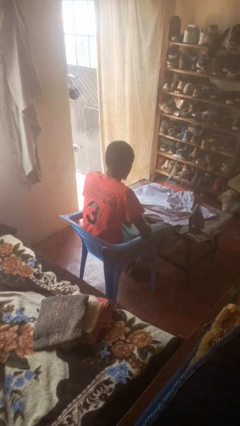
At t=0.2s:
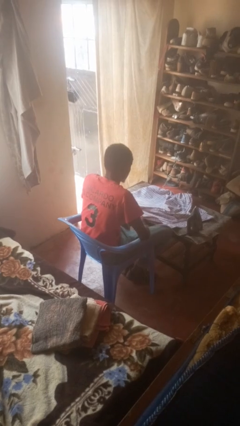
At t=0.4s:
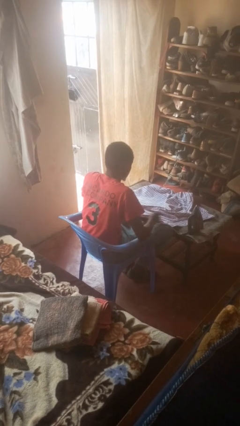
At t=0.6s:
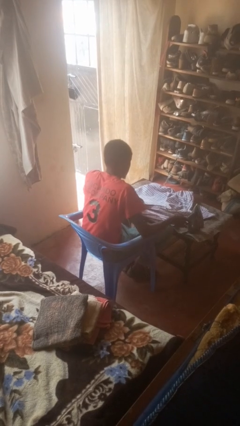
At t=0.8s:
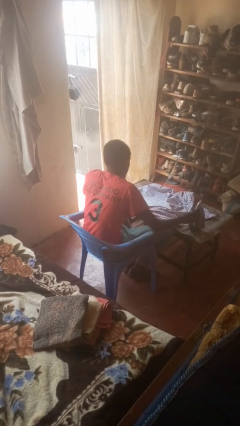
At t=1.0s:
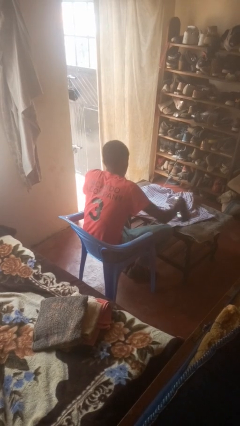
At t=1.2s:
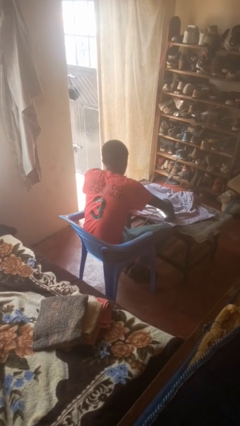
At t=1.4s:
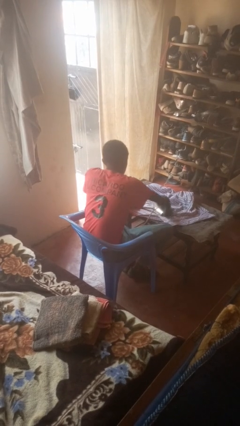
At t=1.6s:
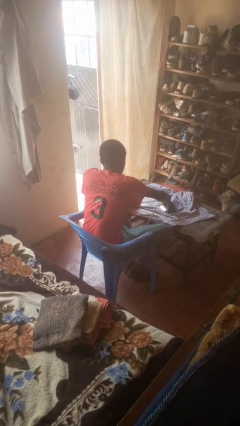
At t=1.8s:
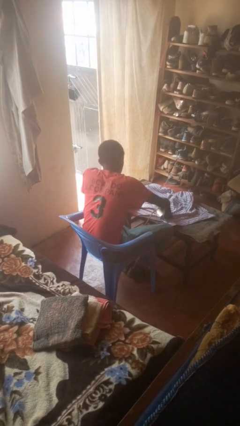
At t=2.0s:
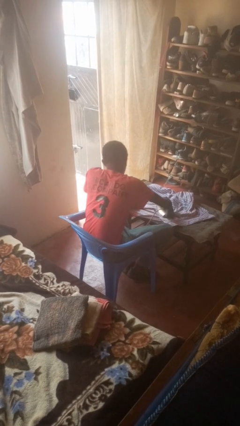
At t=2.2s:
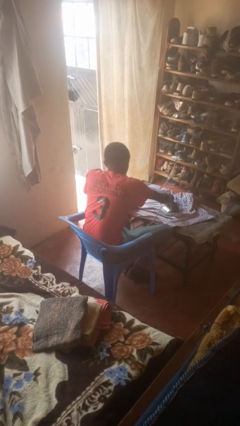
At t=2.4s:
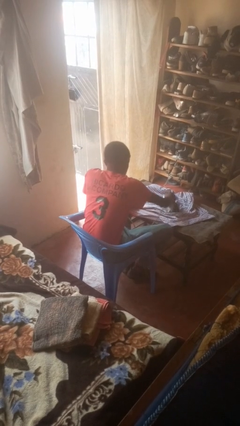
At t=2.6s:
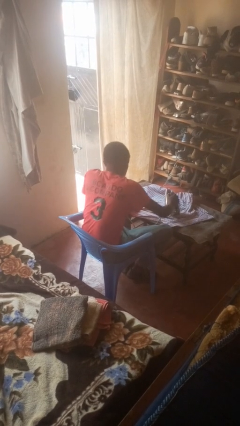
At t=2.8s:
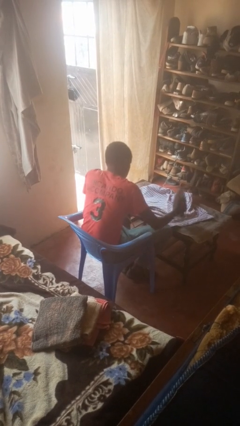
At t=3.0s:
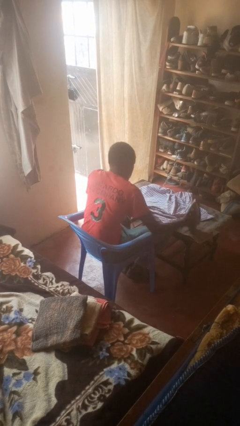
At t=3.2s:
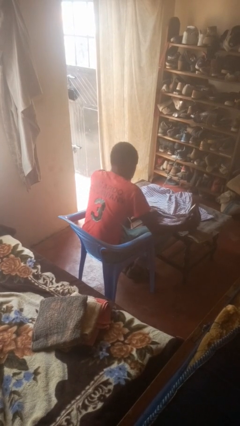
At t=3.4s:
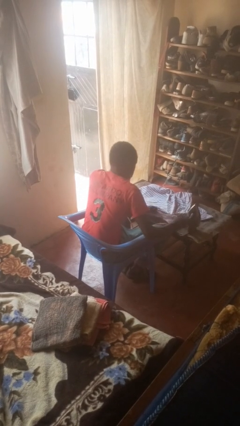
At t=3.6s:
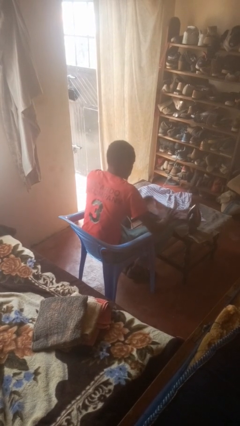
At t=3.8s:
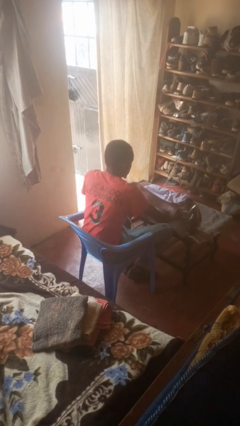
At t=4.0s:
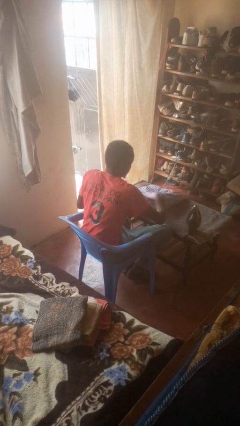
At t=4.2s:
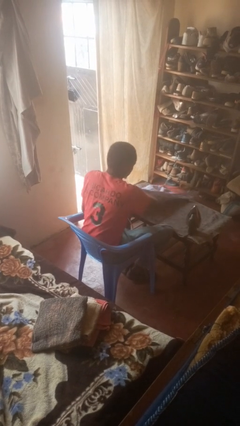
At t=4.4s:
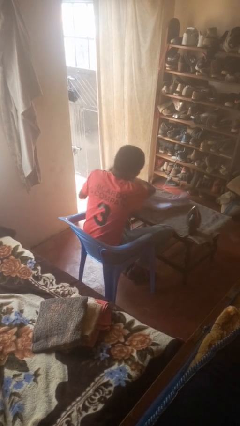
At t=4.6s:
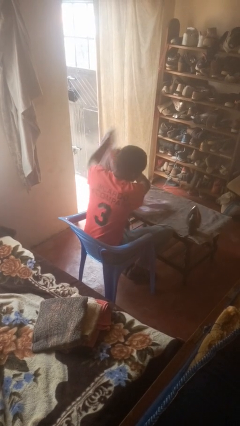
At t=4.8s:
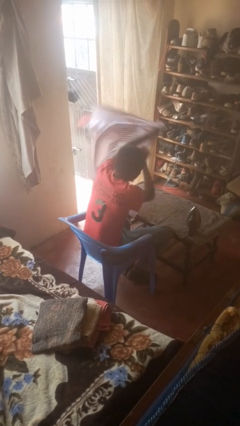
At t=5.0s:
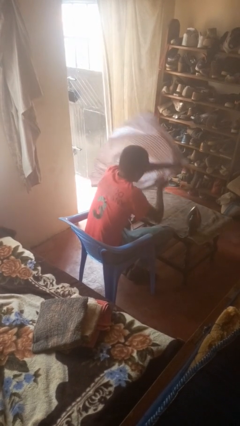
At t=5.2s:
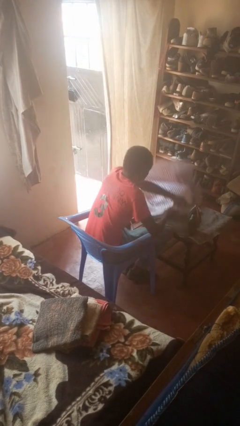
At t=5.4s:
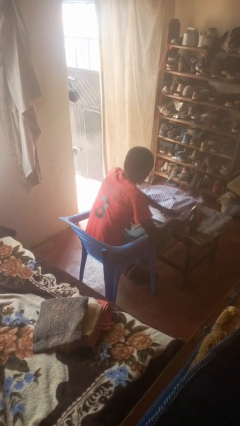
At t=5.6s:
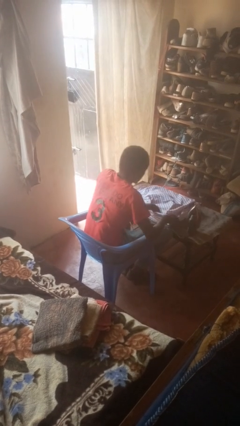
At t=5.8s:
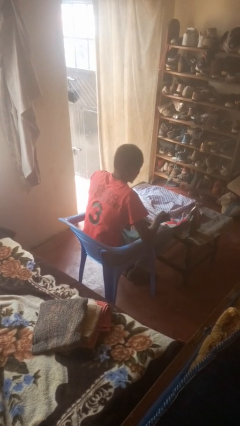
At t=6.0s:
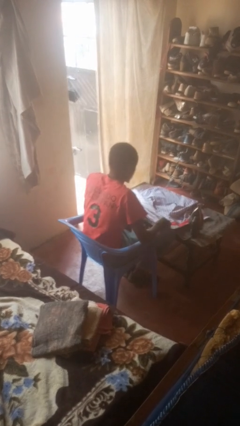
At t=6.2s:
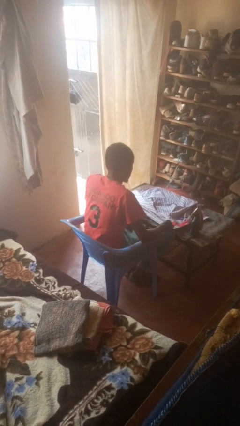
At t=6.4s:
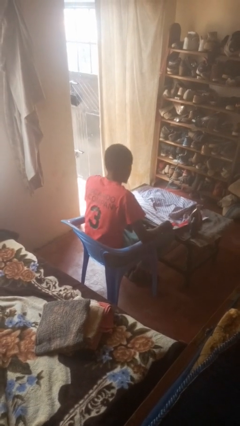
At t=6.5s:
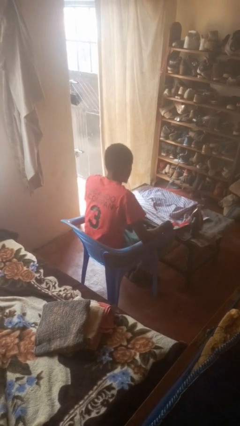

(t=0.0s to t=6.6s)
person irons clothes

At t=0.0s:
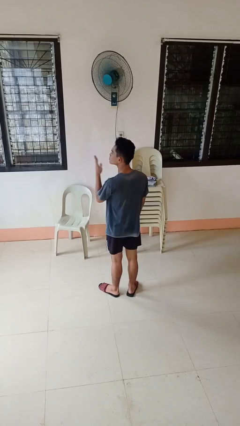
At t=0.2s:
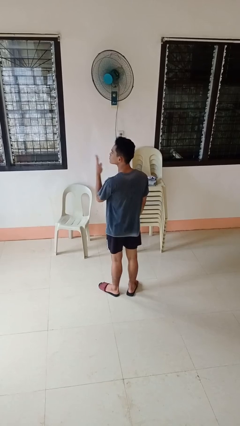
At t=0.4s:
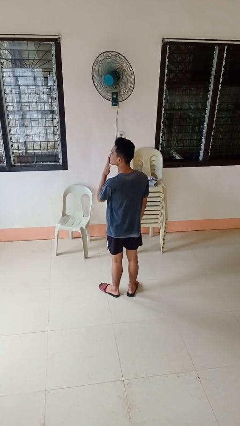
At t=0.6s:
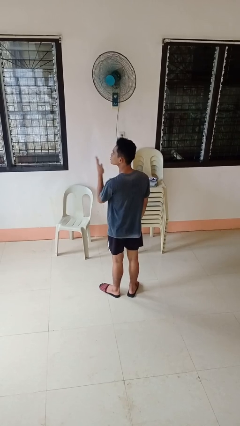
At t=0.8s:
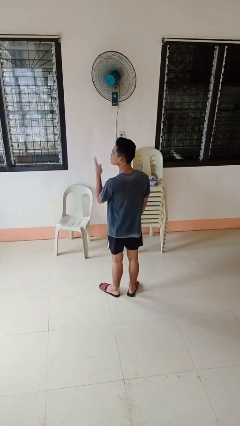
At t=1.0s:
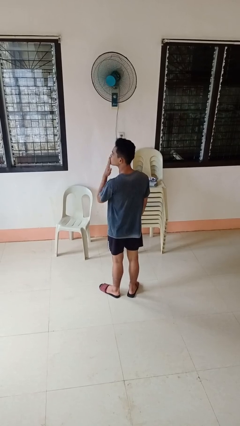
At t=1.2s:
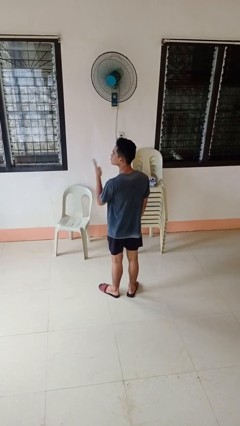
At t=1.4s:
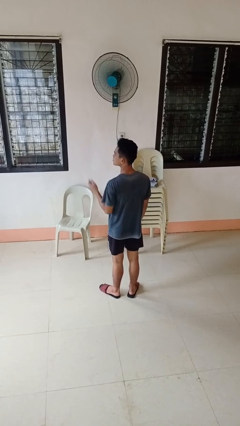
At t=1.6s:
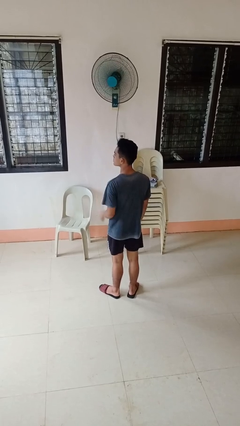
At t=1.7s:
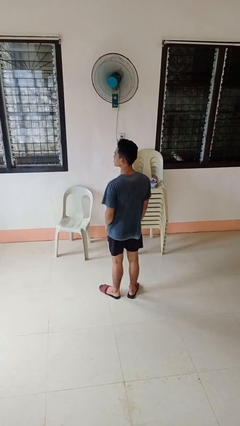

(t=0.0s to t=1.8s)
person gestures blow kiss

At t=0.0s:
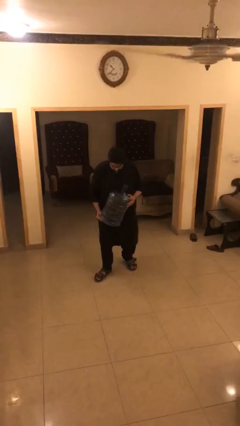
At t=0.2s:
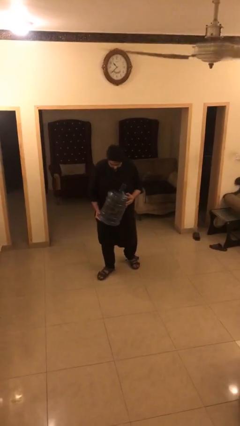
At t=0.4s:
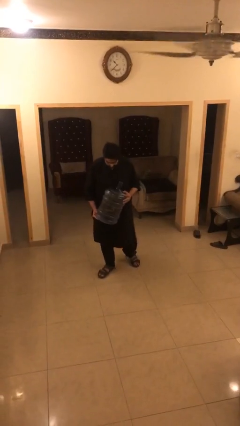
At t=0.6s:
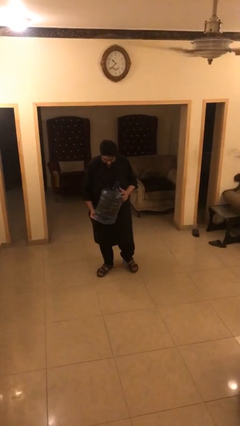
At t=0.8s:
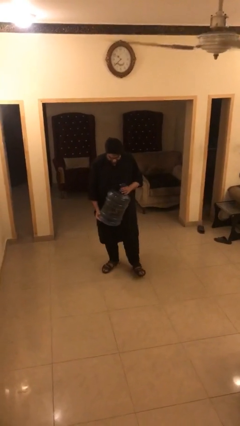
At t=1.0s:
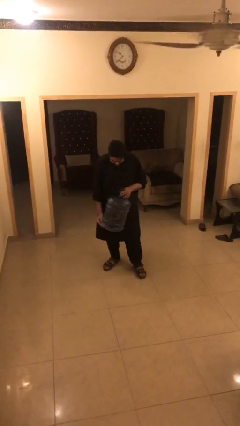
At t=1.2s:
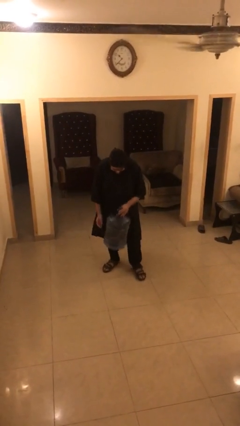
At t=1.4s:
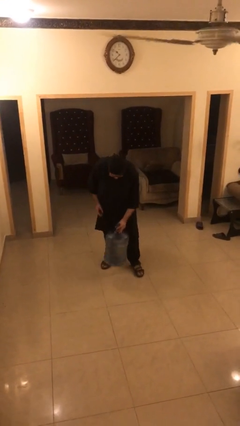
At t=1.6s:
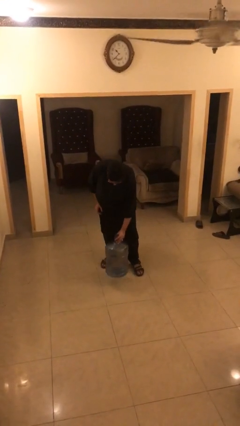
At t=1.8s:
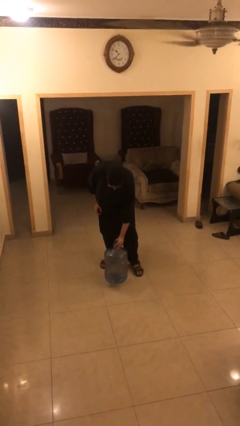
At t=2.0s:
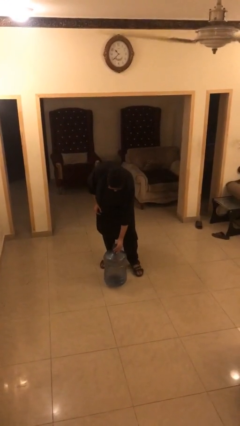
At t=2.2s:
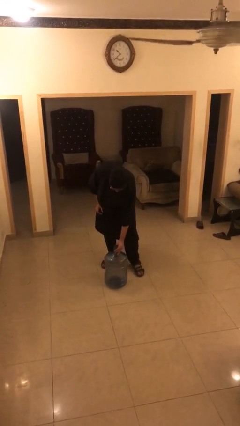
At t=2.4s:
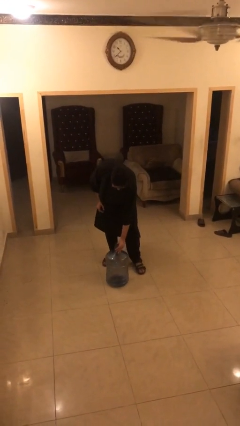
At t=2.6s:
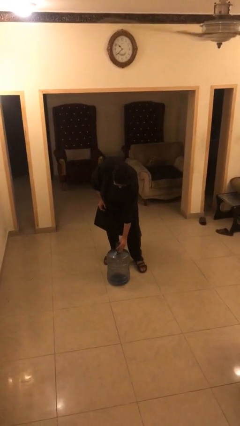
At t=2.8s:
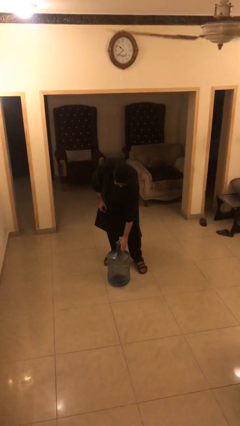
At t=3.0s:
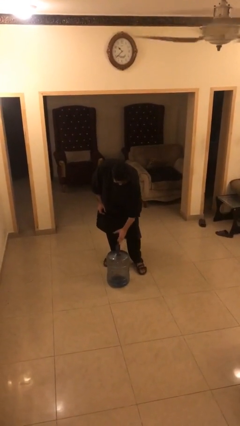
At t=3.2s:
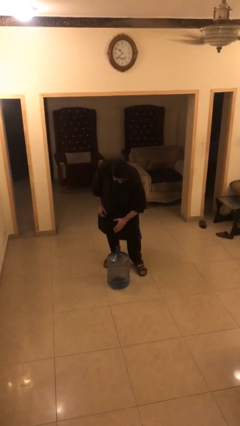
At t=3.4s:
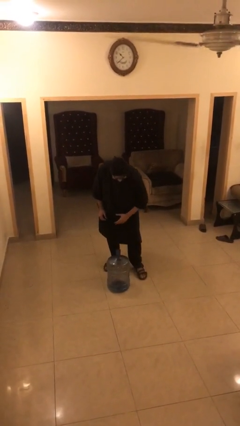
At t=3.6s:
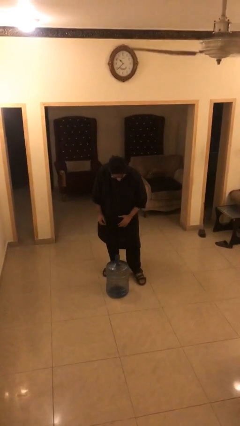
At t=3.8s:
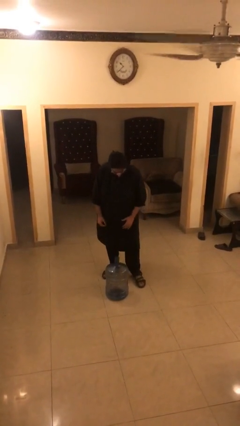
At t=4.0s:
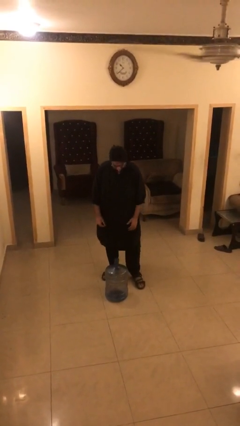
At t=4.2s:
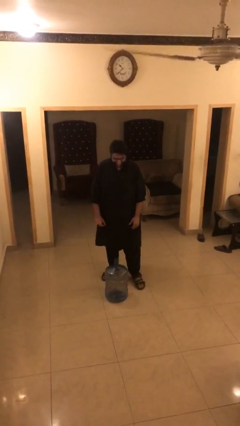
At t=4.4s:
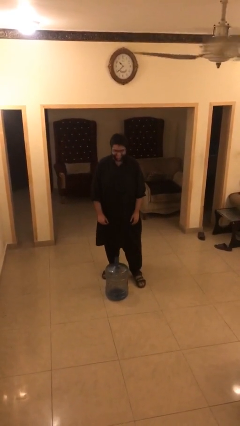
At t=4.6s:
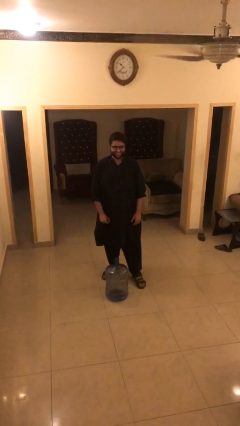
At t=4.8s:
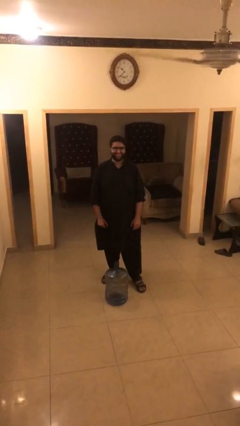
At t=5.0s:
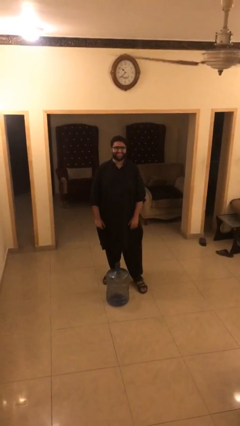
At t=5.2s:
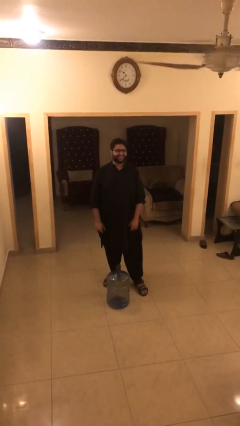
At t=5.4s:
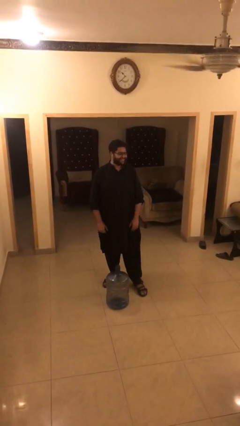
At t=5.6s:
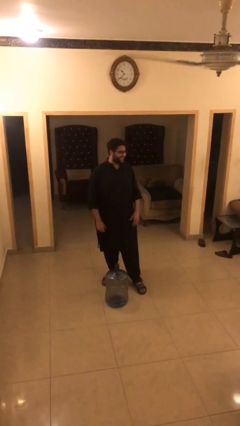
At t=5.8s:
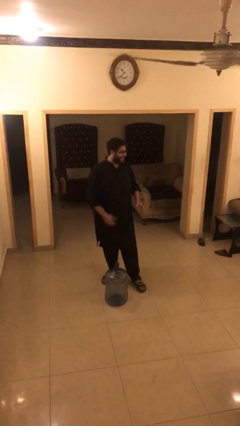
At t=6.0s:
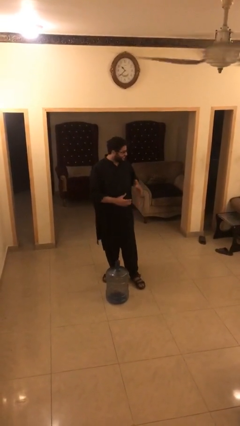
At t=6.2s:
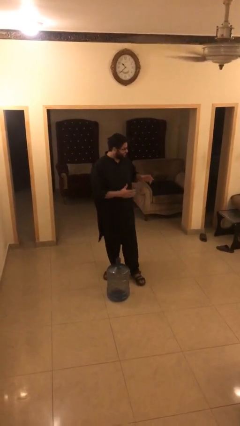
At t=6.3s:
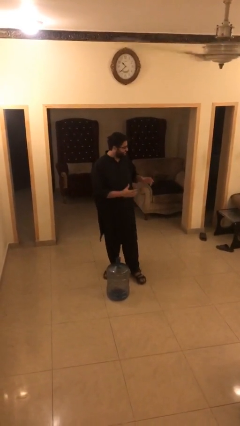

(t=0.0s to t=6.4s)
person puts down object on floor

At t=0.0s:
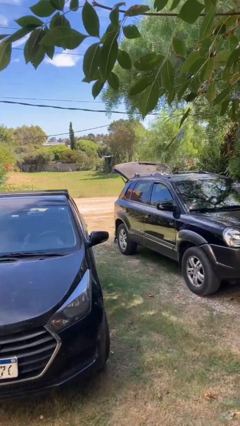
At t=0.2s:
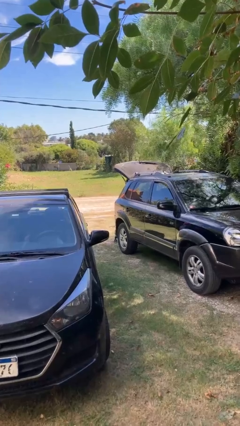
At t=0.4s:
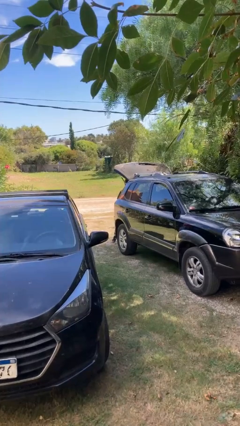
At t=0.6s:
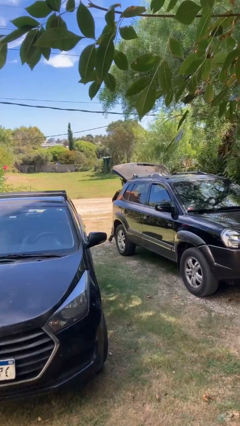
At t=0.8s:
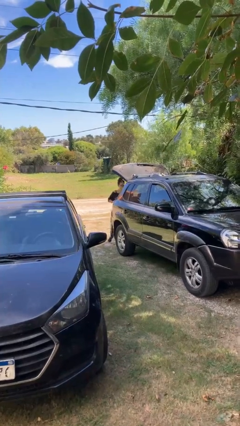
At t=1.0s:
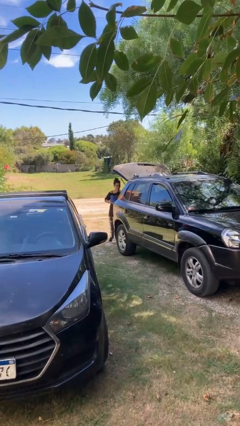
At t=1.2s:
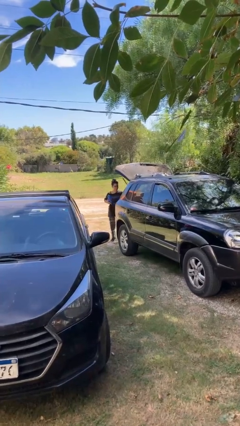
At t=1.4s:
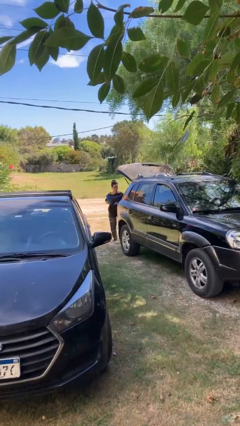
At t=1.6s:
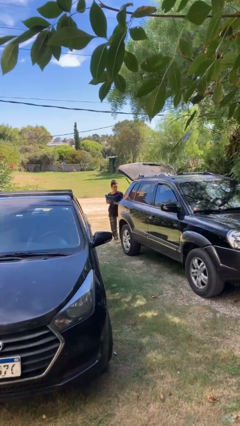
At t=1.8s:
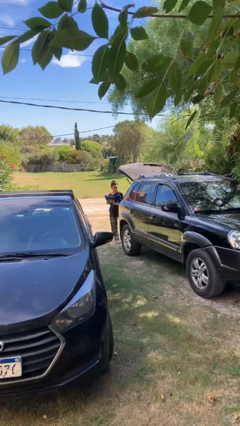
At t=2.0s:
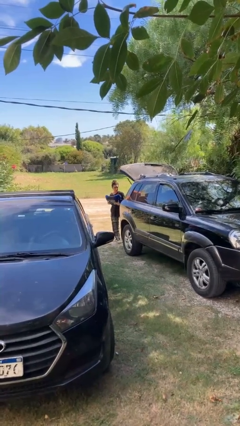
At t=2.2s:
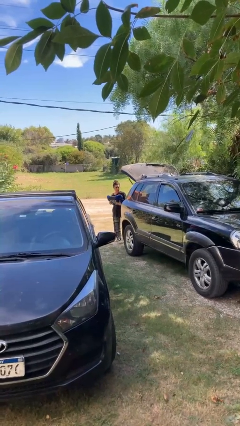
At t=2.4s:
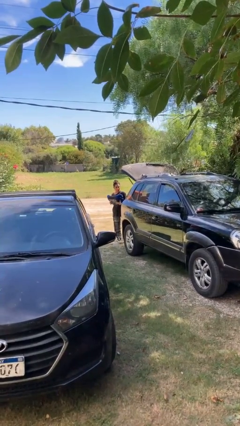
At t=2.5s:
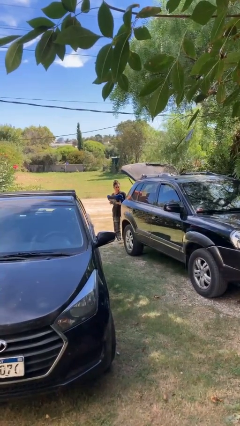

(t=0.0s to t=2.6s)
person unloads car
